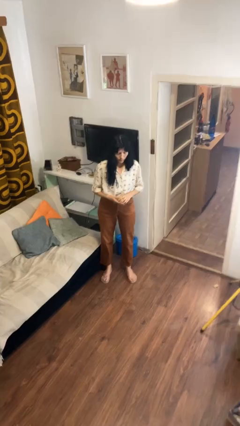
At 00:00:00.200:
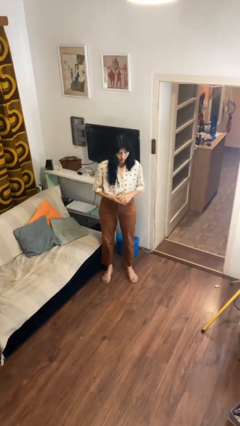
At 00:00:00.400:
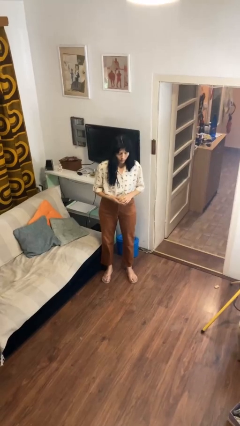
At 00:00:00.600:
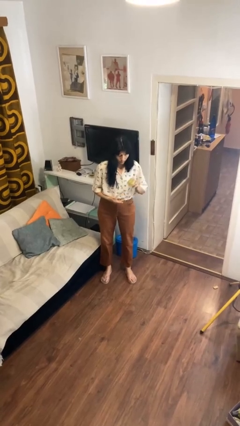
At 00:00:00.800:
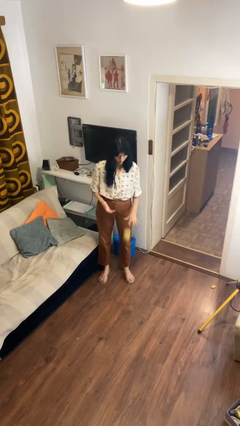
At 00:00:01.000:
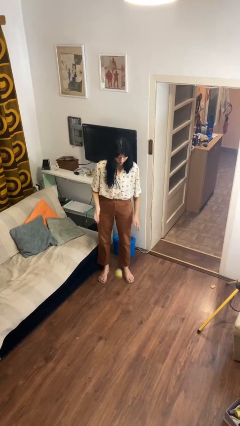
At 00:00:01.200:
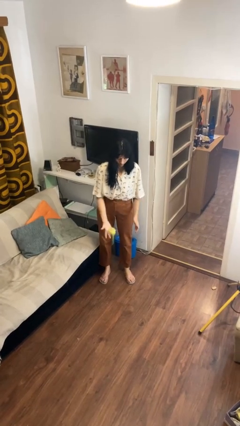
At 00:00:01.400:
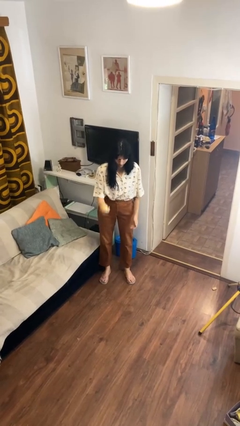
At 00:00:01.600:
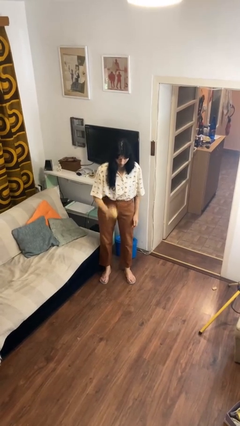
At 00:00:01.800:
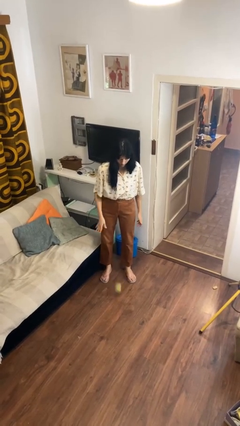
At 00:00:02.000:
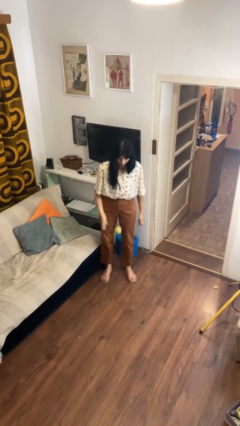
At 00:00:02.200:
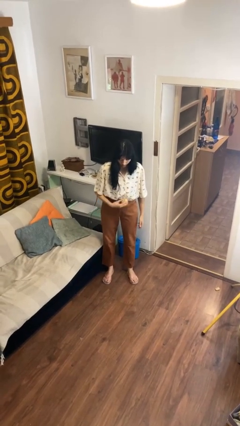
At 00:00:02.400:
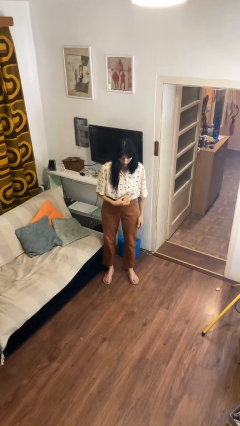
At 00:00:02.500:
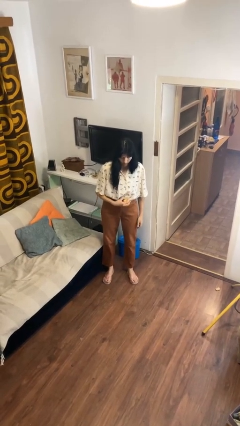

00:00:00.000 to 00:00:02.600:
person bounces ball on floor

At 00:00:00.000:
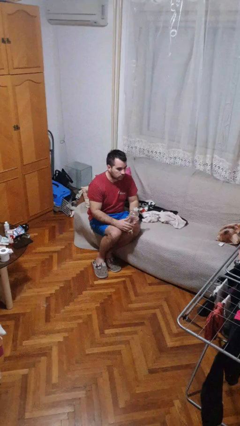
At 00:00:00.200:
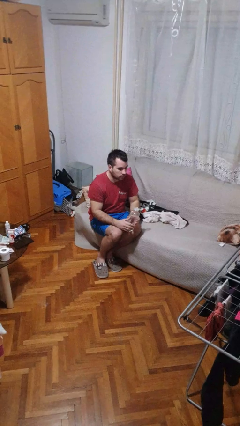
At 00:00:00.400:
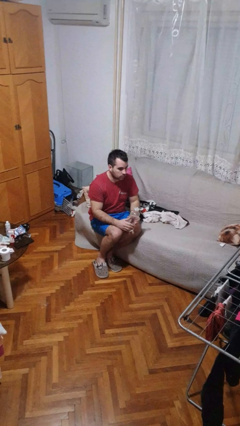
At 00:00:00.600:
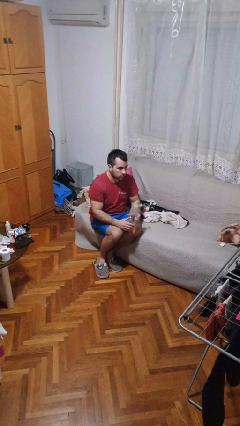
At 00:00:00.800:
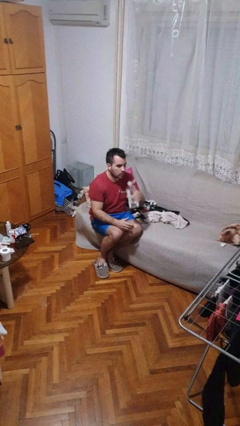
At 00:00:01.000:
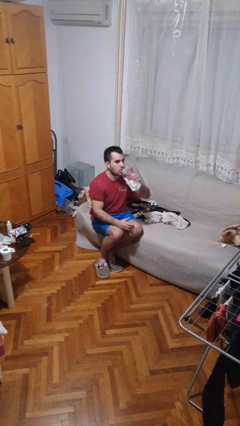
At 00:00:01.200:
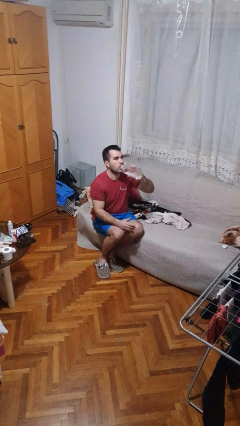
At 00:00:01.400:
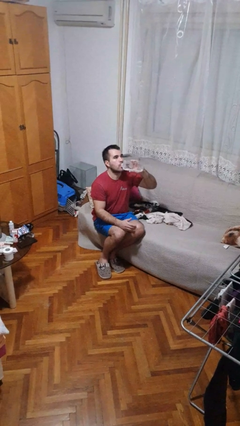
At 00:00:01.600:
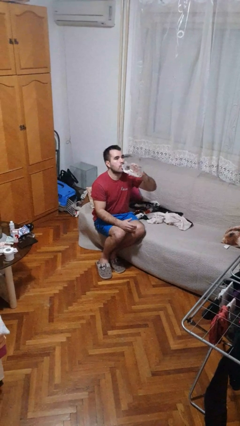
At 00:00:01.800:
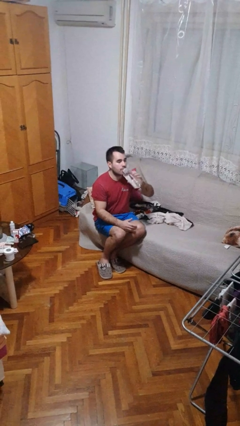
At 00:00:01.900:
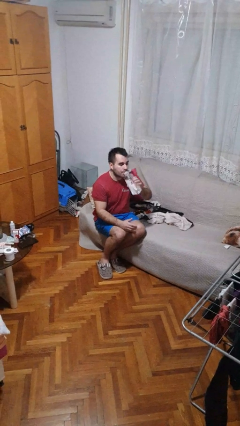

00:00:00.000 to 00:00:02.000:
person drinks from bottle

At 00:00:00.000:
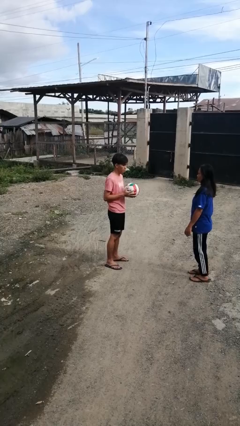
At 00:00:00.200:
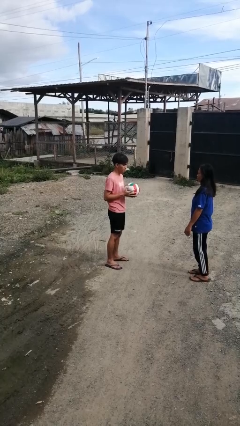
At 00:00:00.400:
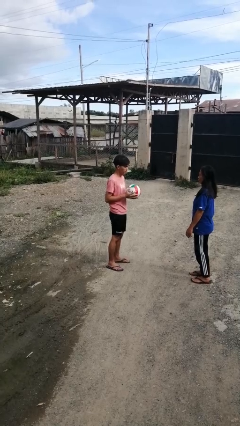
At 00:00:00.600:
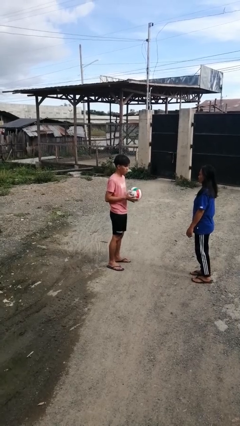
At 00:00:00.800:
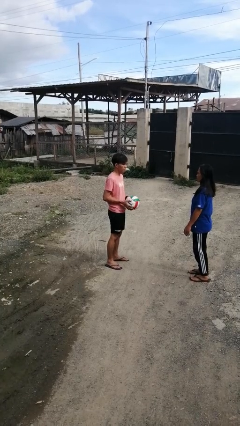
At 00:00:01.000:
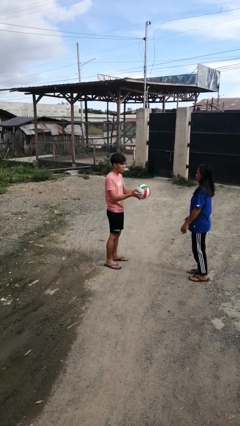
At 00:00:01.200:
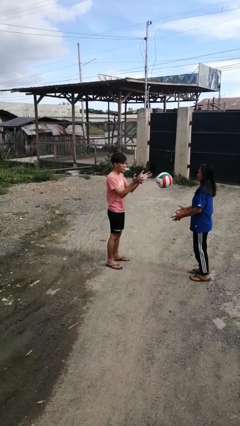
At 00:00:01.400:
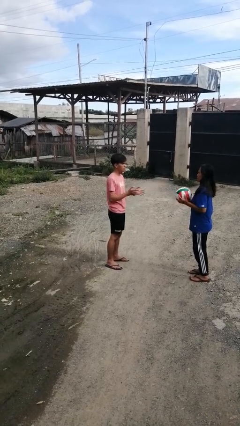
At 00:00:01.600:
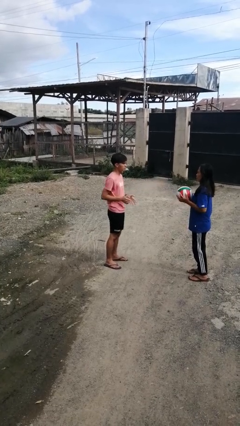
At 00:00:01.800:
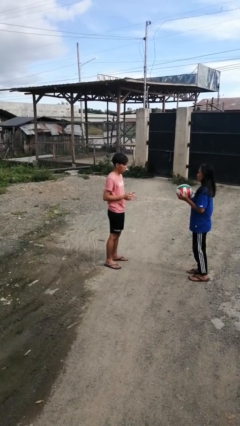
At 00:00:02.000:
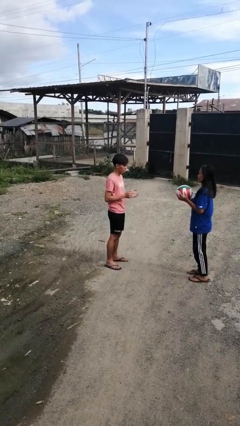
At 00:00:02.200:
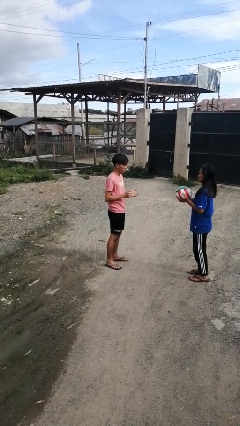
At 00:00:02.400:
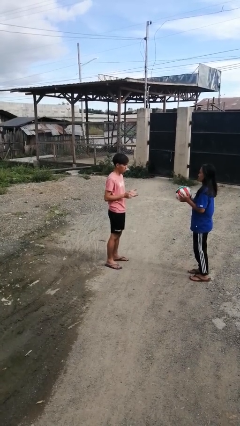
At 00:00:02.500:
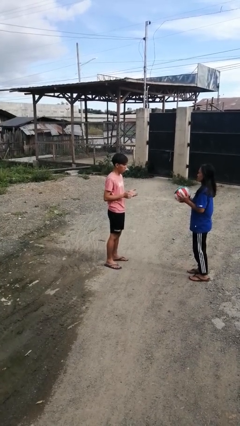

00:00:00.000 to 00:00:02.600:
person throws object to person

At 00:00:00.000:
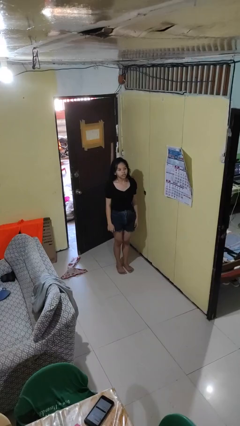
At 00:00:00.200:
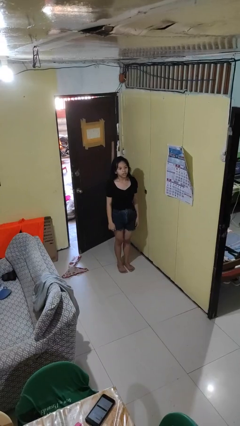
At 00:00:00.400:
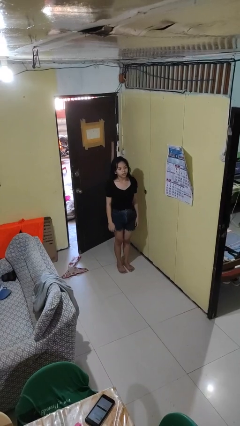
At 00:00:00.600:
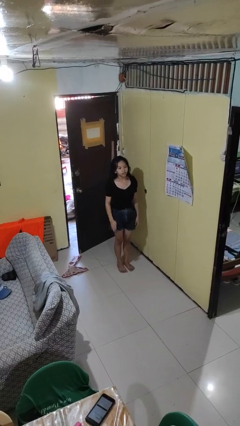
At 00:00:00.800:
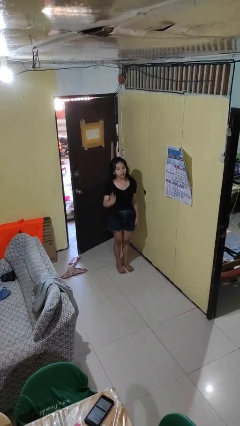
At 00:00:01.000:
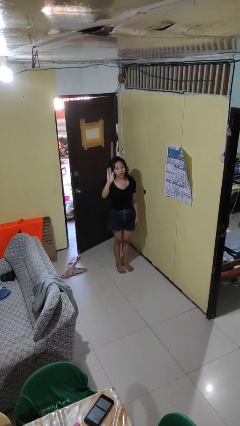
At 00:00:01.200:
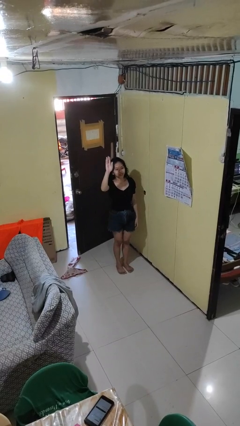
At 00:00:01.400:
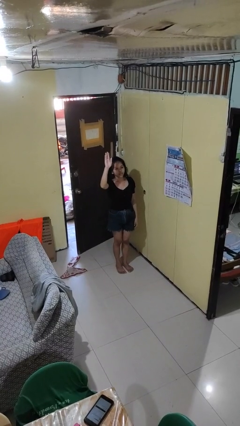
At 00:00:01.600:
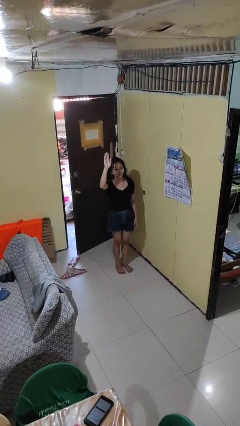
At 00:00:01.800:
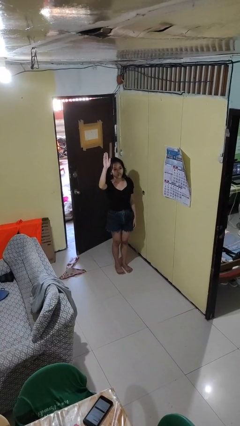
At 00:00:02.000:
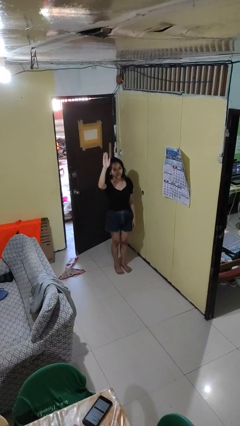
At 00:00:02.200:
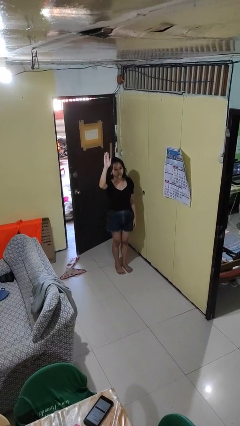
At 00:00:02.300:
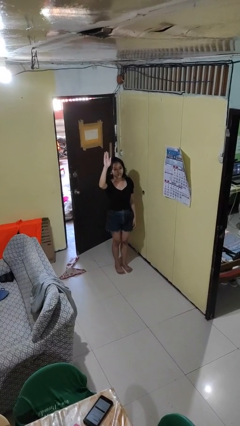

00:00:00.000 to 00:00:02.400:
person gestures raise hand

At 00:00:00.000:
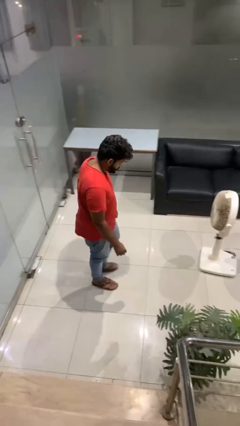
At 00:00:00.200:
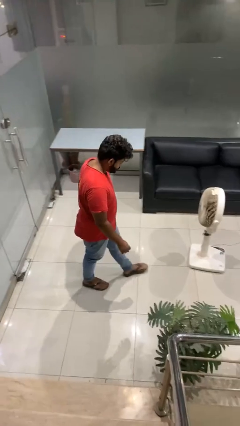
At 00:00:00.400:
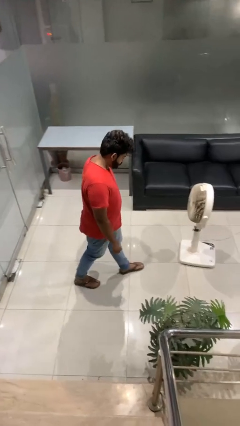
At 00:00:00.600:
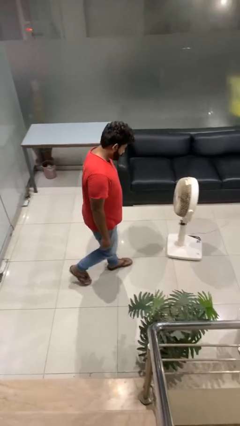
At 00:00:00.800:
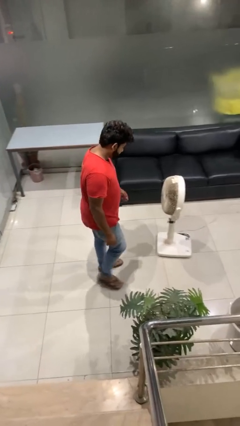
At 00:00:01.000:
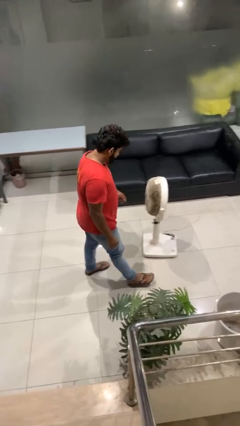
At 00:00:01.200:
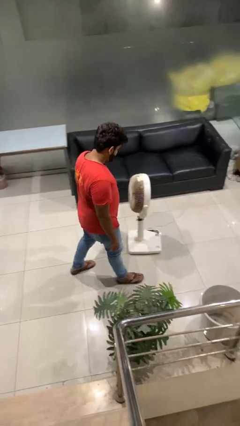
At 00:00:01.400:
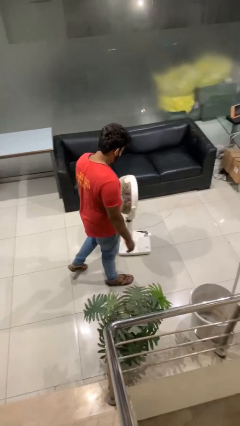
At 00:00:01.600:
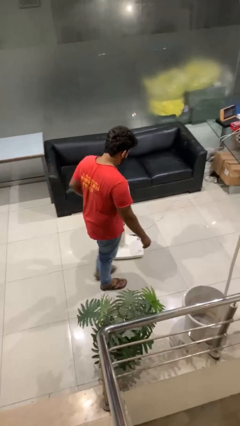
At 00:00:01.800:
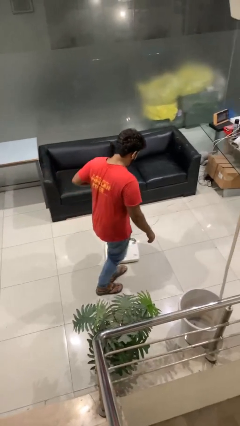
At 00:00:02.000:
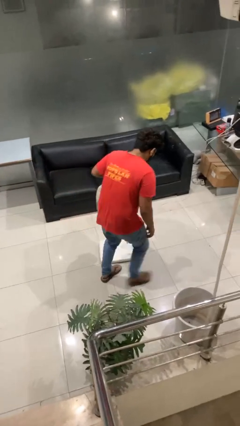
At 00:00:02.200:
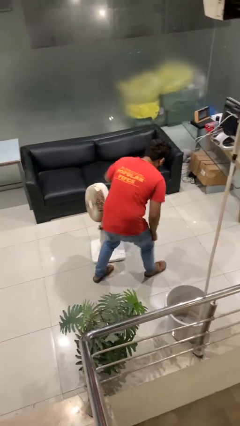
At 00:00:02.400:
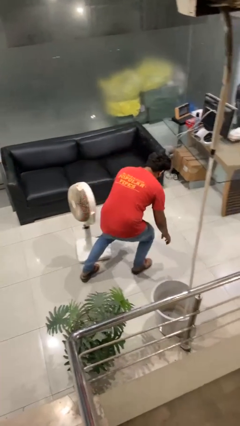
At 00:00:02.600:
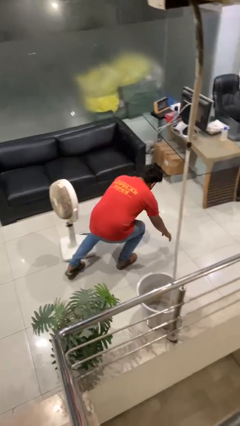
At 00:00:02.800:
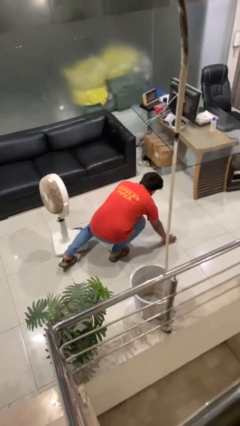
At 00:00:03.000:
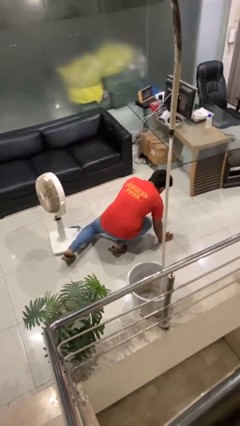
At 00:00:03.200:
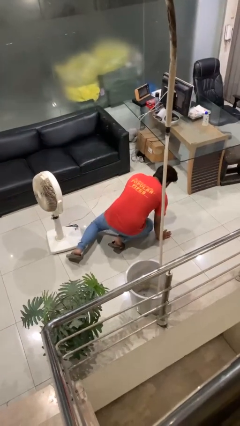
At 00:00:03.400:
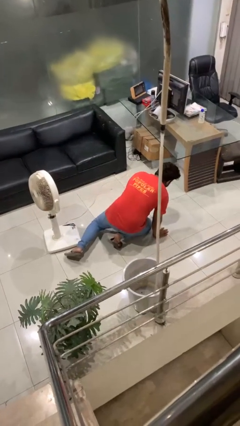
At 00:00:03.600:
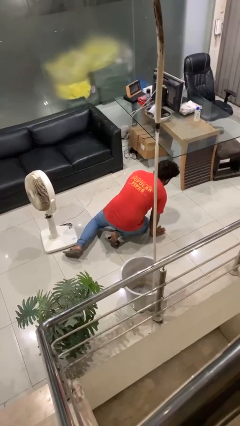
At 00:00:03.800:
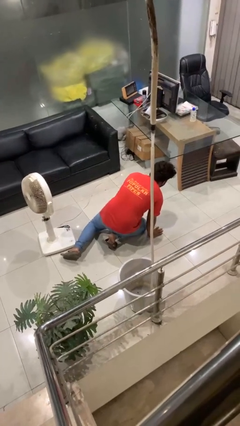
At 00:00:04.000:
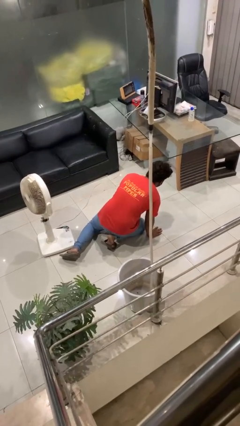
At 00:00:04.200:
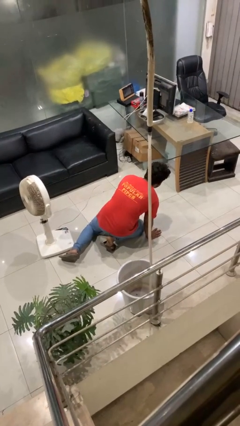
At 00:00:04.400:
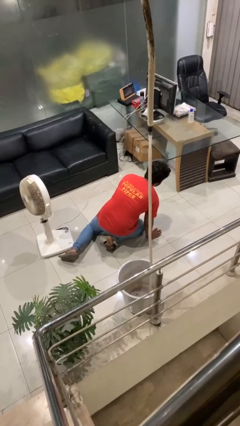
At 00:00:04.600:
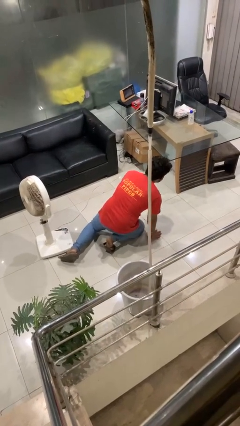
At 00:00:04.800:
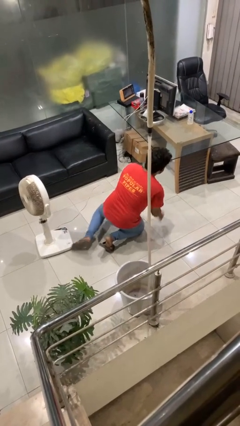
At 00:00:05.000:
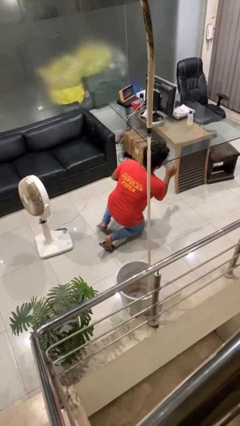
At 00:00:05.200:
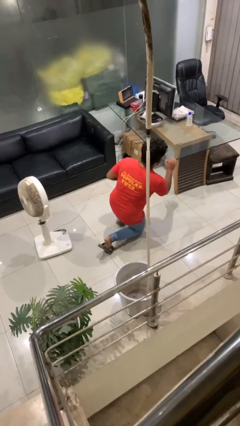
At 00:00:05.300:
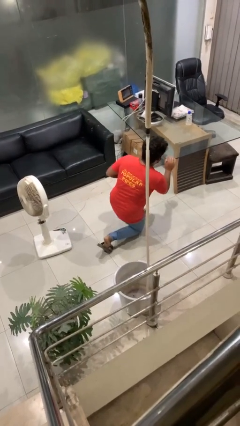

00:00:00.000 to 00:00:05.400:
person trips on object on floor

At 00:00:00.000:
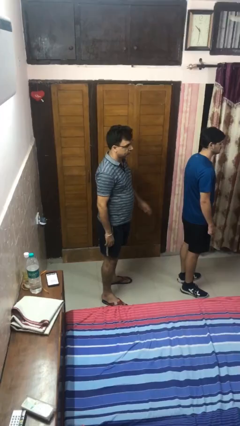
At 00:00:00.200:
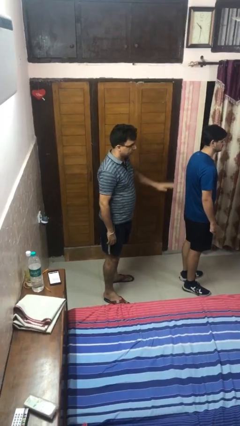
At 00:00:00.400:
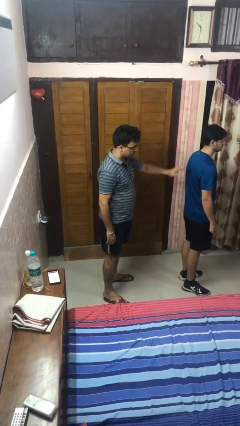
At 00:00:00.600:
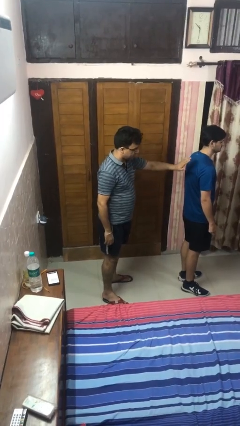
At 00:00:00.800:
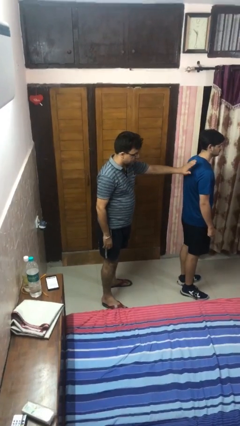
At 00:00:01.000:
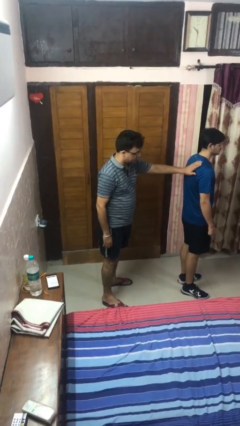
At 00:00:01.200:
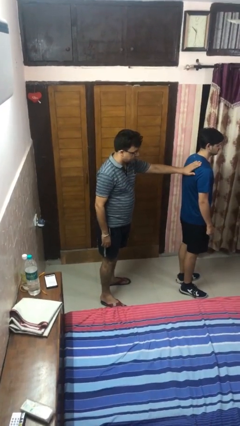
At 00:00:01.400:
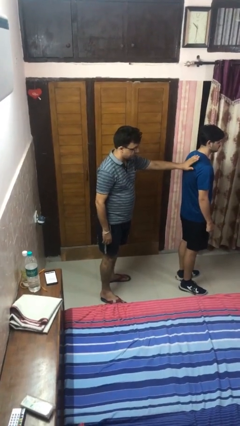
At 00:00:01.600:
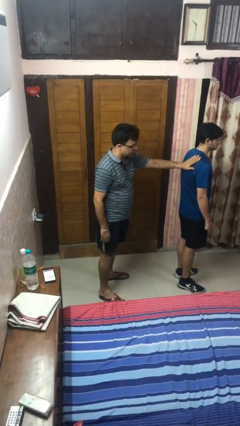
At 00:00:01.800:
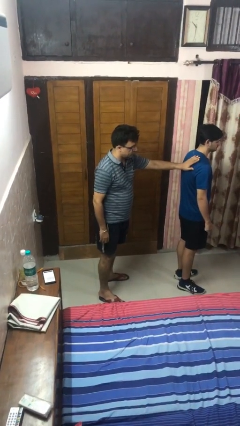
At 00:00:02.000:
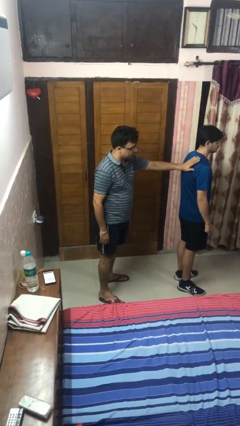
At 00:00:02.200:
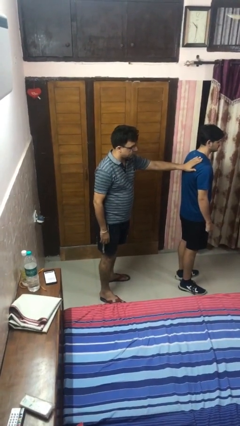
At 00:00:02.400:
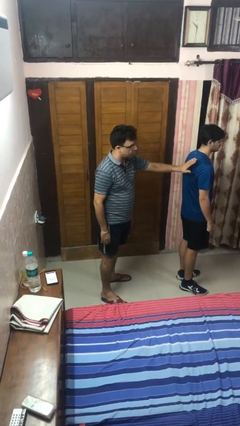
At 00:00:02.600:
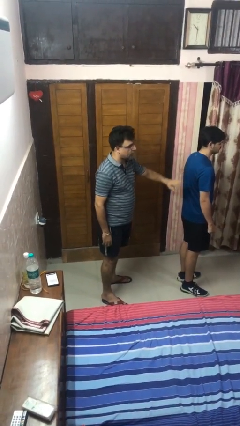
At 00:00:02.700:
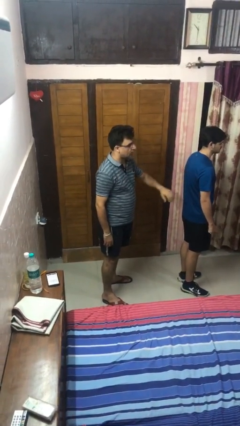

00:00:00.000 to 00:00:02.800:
person touches back of person
